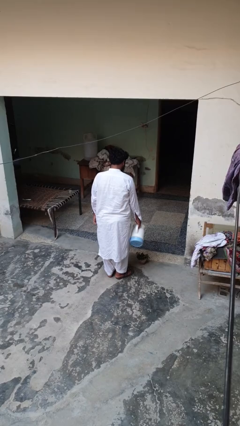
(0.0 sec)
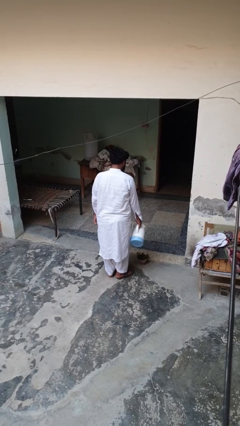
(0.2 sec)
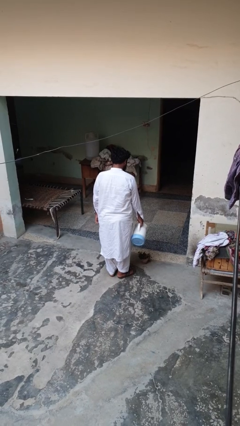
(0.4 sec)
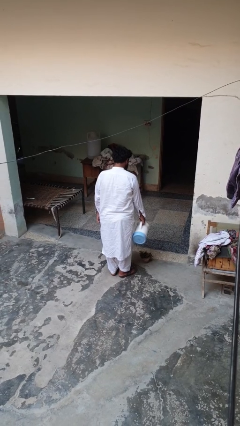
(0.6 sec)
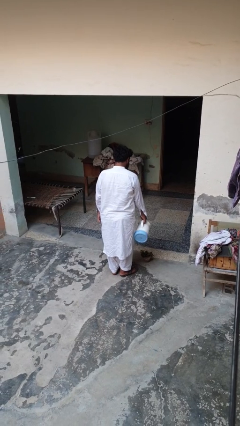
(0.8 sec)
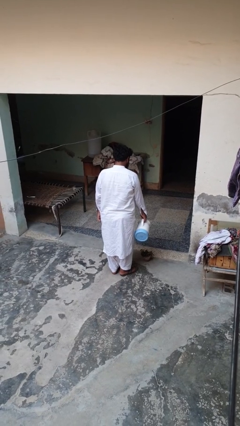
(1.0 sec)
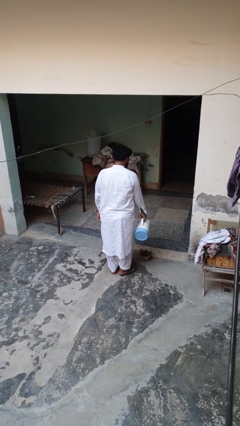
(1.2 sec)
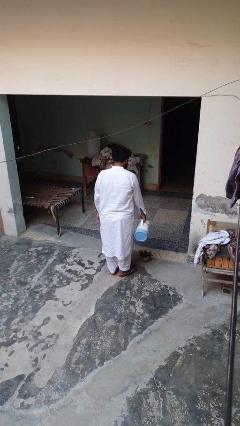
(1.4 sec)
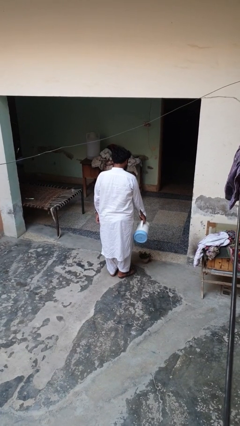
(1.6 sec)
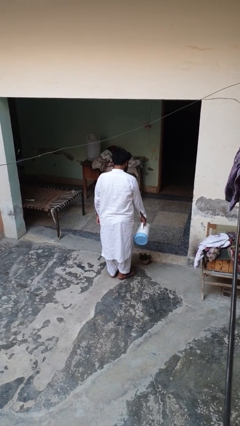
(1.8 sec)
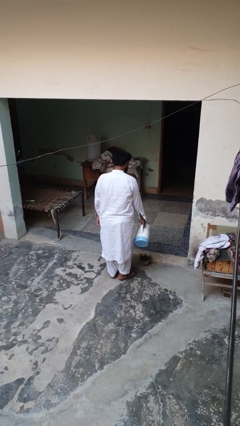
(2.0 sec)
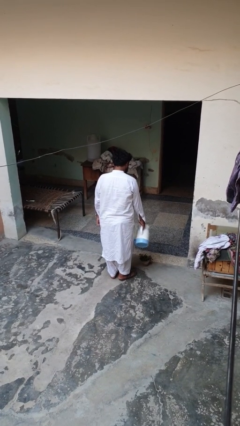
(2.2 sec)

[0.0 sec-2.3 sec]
person waters houseplant

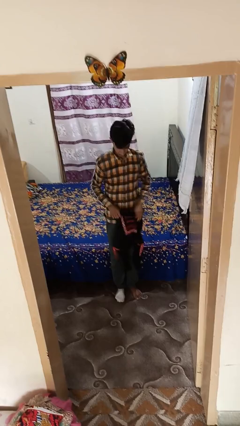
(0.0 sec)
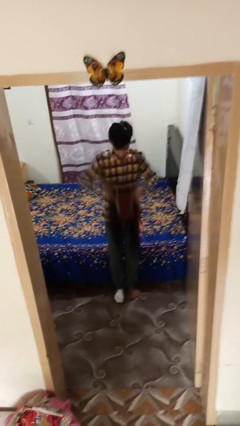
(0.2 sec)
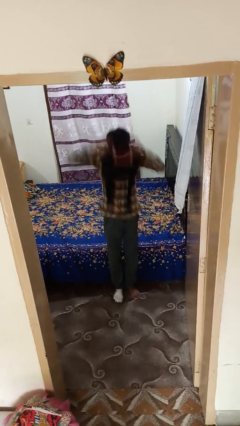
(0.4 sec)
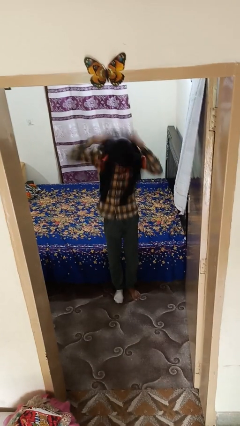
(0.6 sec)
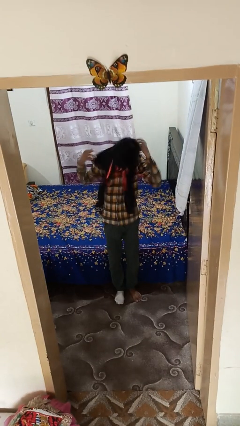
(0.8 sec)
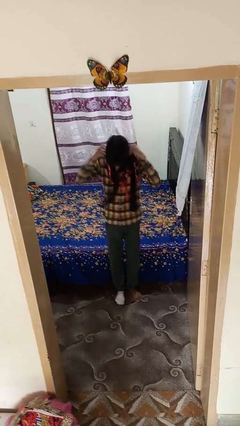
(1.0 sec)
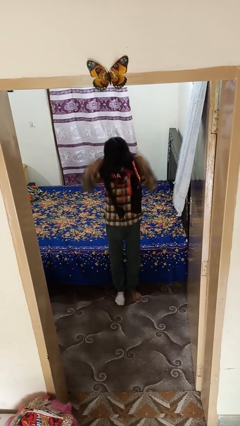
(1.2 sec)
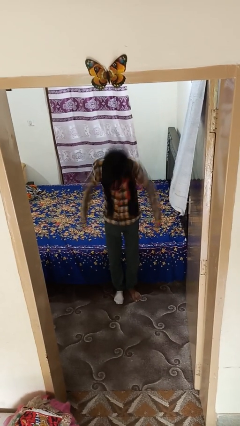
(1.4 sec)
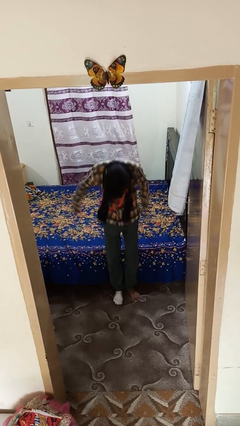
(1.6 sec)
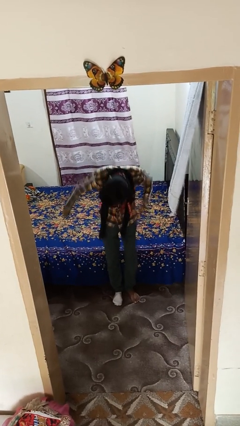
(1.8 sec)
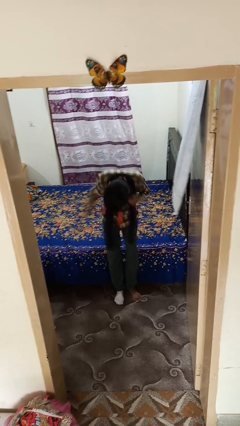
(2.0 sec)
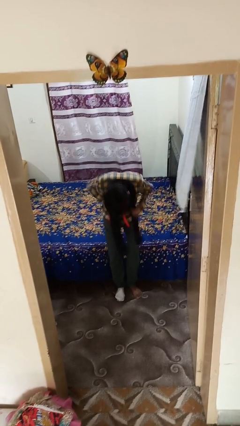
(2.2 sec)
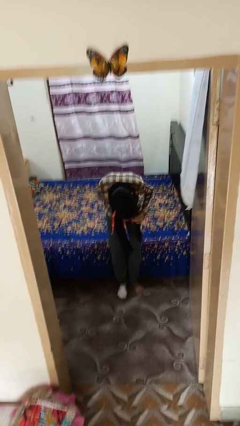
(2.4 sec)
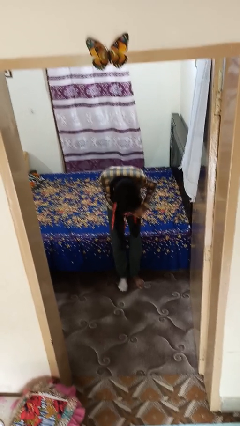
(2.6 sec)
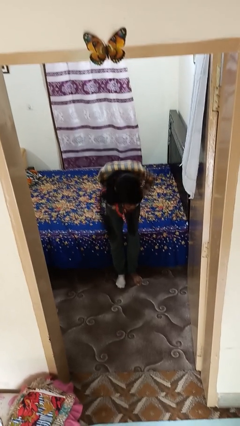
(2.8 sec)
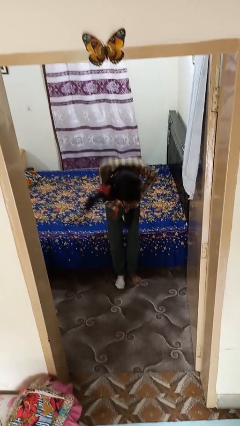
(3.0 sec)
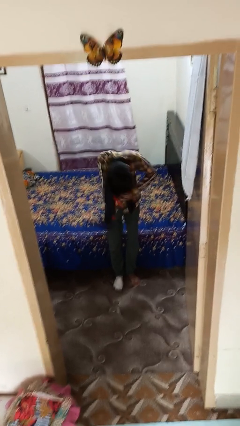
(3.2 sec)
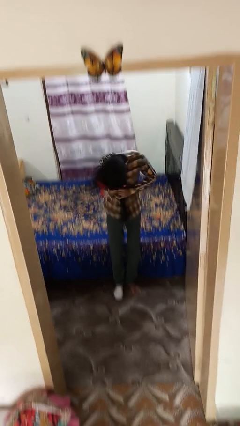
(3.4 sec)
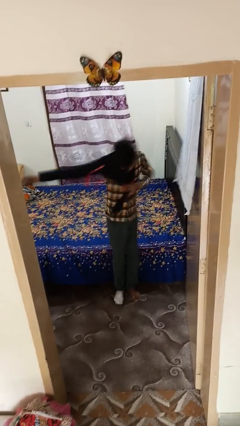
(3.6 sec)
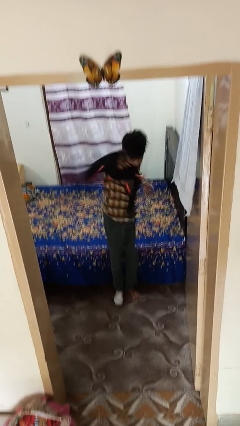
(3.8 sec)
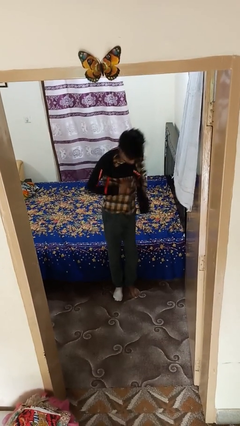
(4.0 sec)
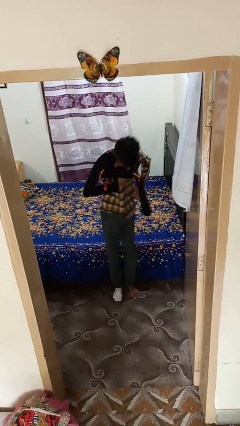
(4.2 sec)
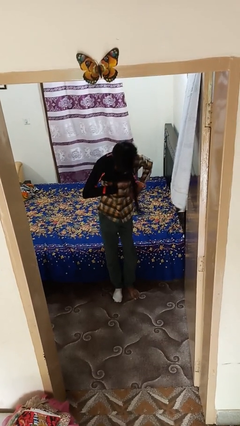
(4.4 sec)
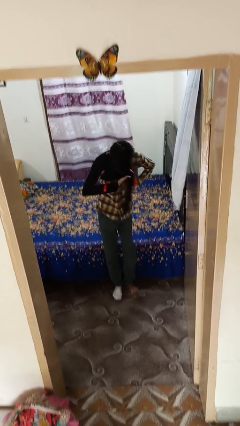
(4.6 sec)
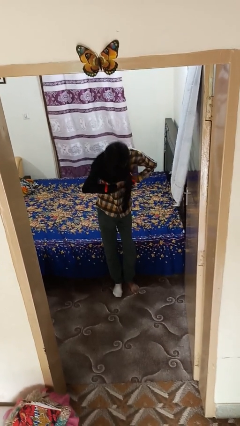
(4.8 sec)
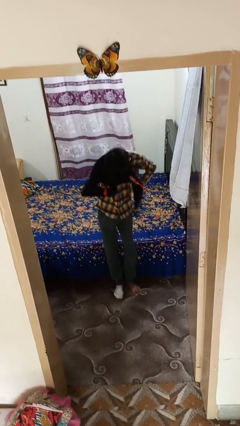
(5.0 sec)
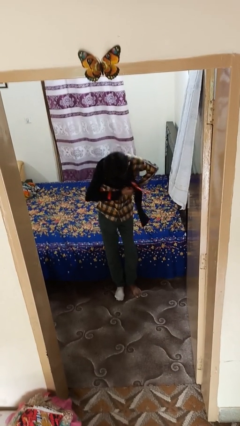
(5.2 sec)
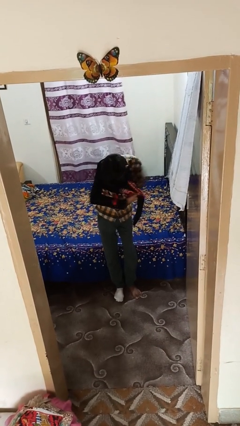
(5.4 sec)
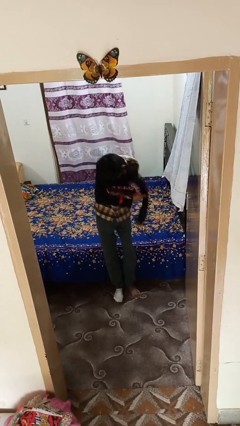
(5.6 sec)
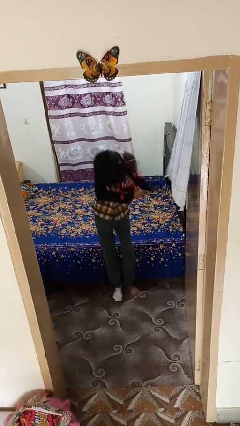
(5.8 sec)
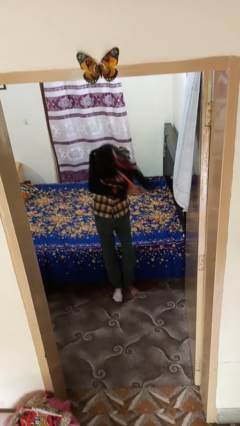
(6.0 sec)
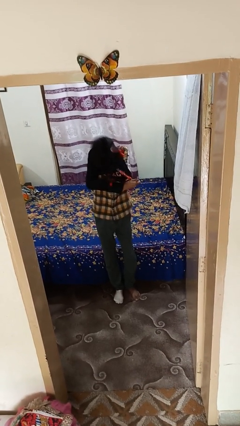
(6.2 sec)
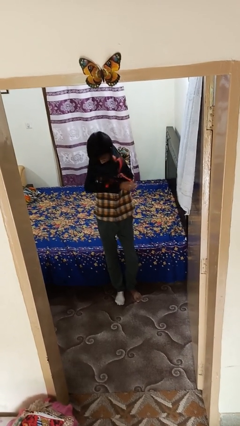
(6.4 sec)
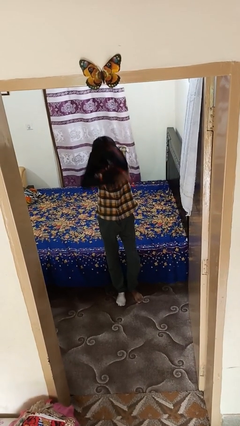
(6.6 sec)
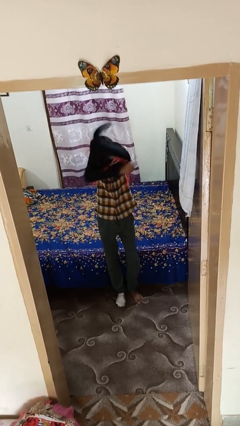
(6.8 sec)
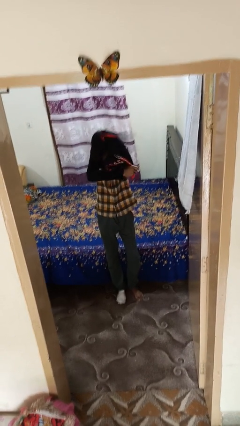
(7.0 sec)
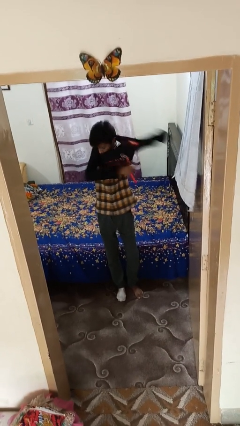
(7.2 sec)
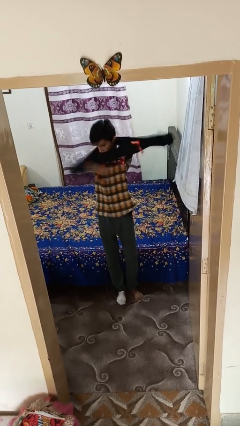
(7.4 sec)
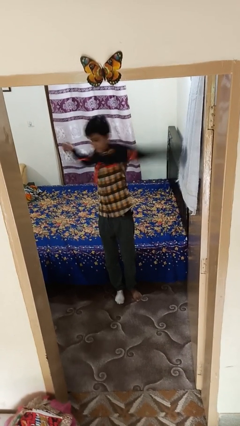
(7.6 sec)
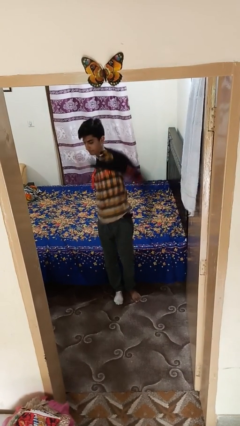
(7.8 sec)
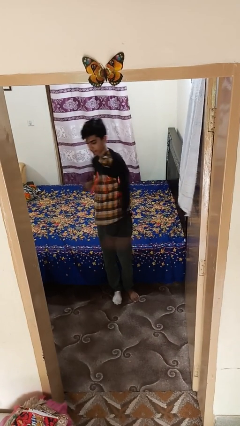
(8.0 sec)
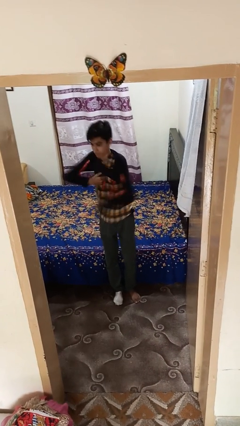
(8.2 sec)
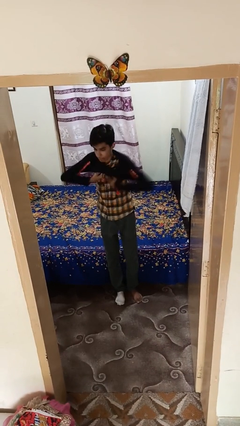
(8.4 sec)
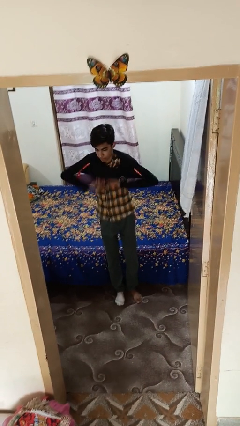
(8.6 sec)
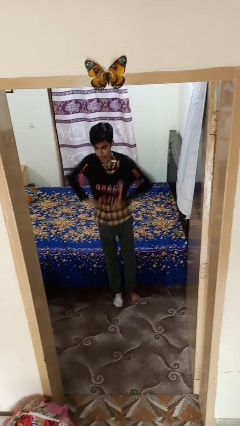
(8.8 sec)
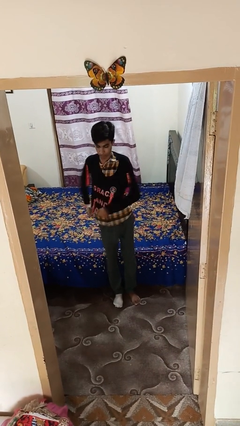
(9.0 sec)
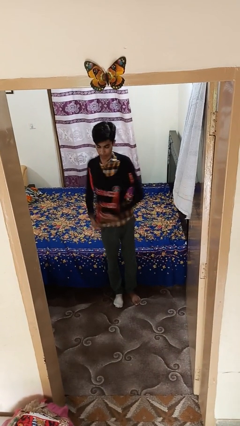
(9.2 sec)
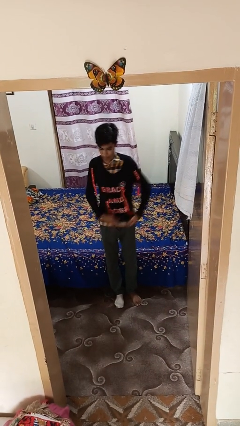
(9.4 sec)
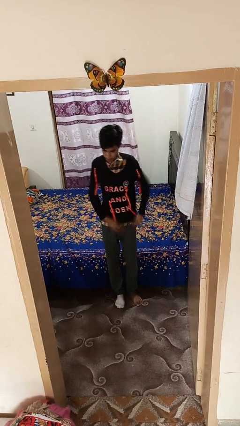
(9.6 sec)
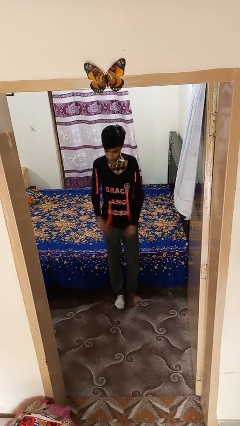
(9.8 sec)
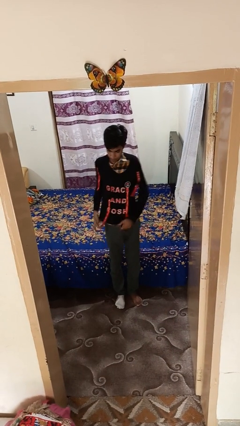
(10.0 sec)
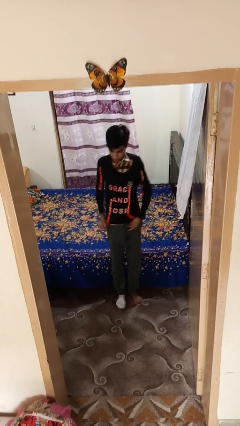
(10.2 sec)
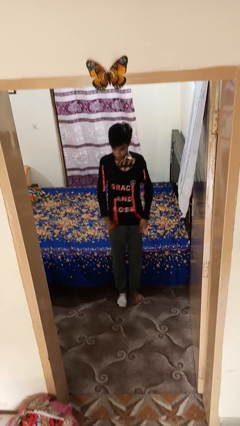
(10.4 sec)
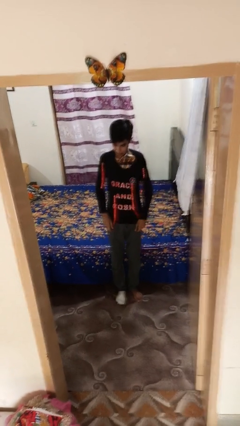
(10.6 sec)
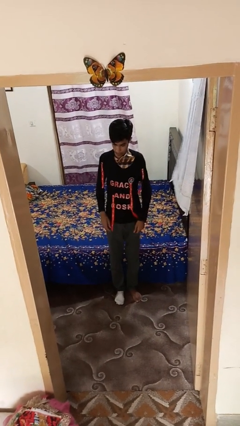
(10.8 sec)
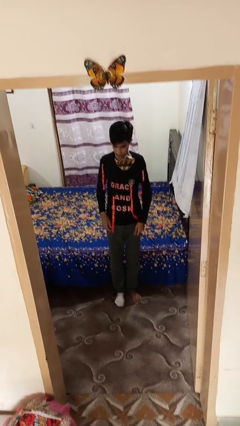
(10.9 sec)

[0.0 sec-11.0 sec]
person puts on shirt

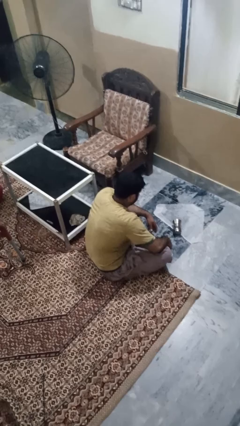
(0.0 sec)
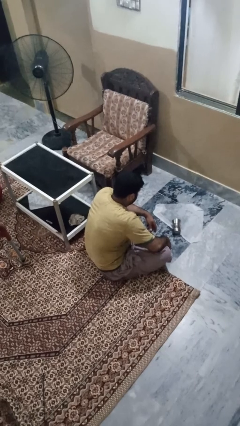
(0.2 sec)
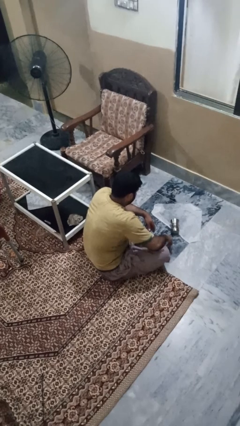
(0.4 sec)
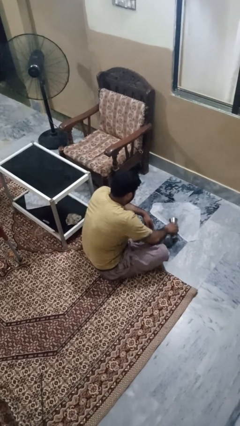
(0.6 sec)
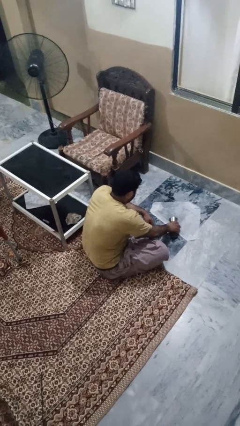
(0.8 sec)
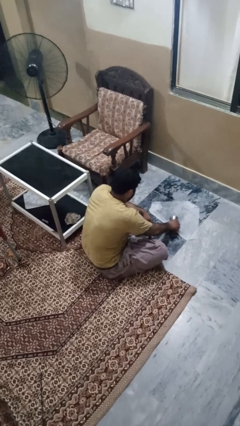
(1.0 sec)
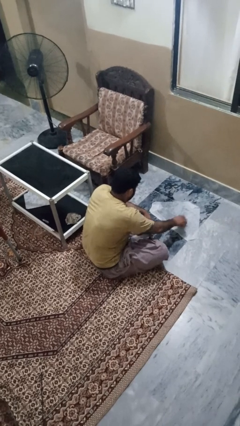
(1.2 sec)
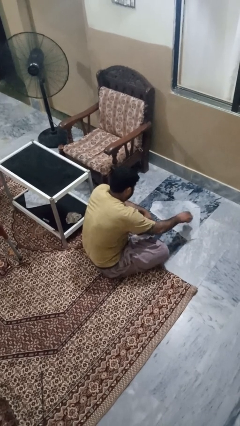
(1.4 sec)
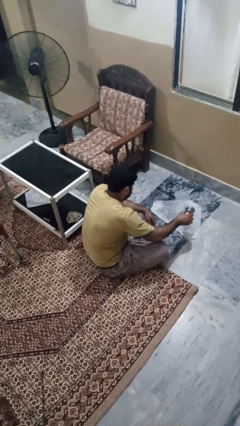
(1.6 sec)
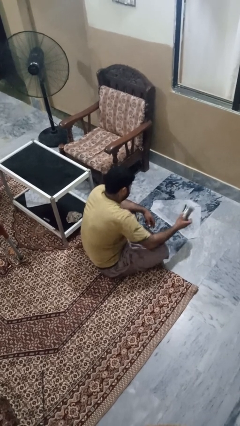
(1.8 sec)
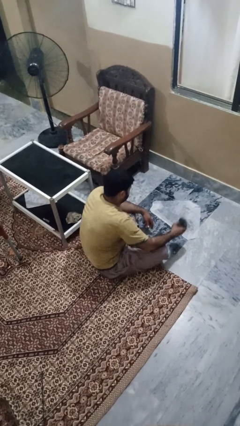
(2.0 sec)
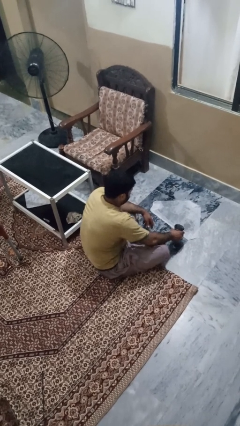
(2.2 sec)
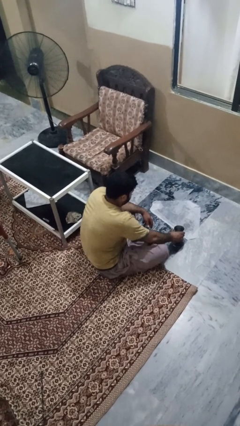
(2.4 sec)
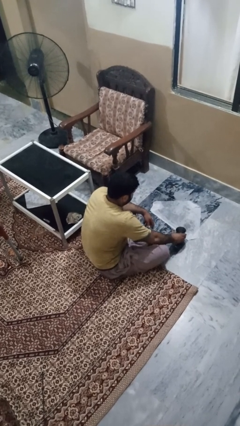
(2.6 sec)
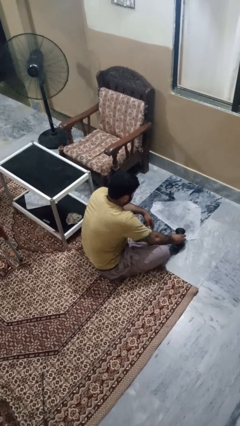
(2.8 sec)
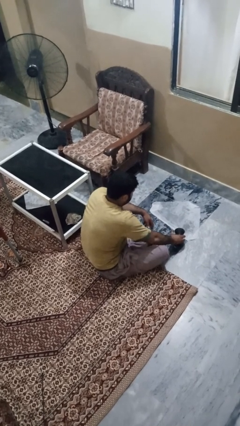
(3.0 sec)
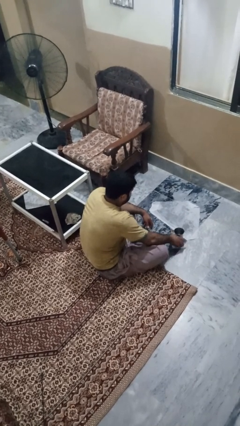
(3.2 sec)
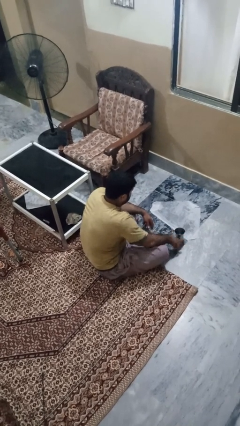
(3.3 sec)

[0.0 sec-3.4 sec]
person sets upright glass

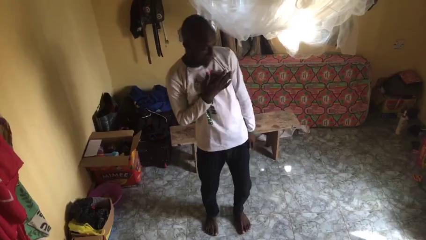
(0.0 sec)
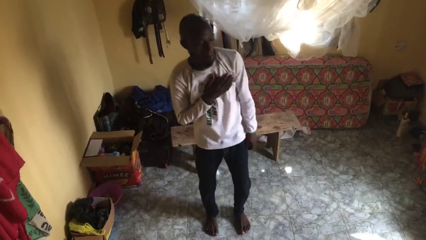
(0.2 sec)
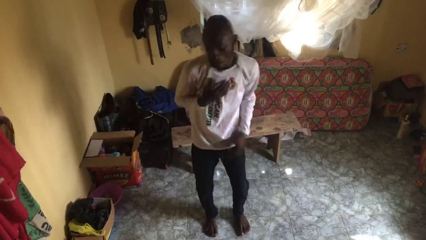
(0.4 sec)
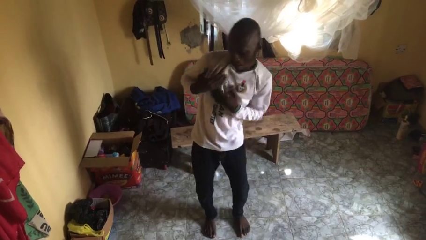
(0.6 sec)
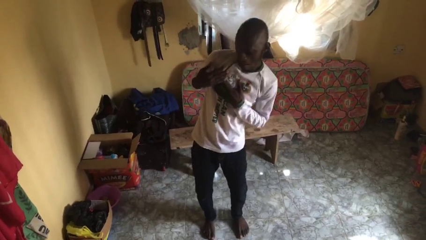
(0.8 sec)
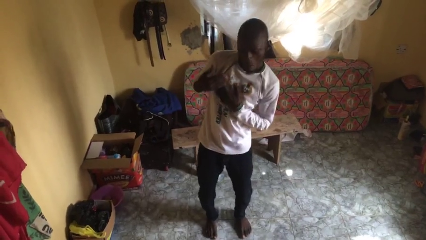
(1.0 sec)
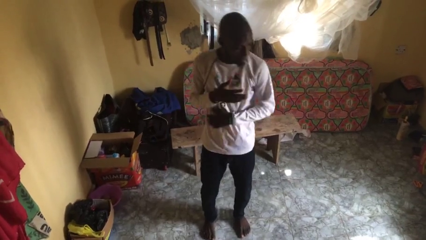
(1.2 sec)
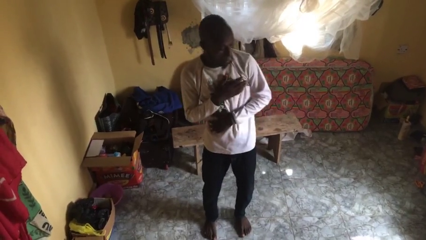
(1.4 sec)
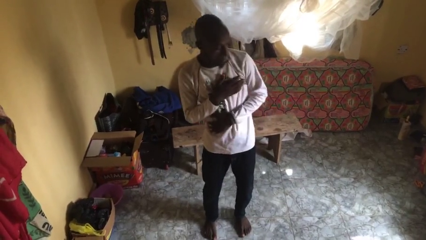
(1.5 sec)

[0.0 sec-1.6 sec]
person dances in place
